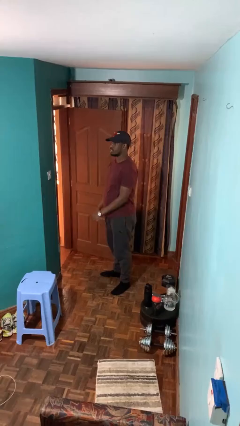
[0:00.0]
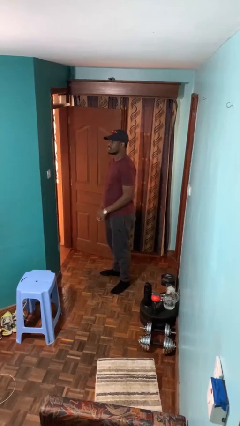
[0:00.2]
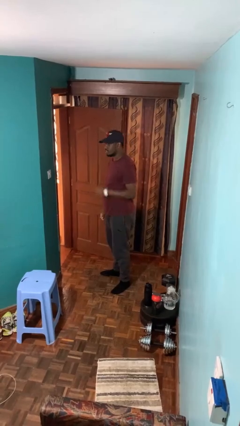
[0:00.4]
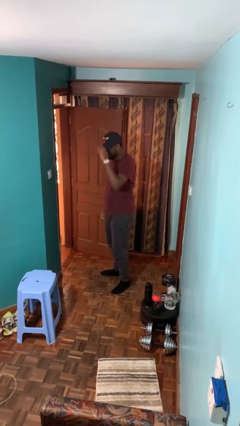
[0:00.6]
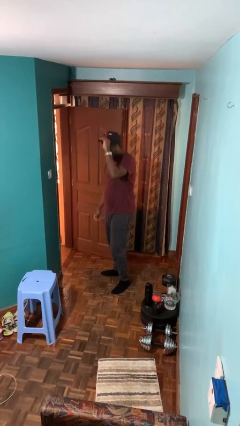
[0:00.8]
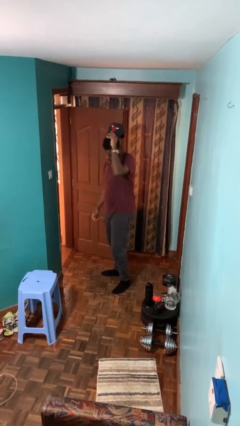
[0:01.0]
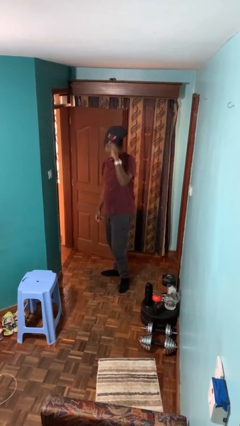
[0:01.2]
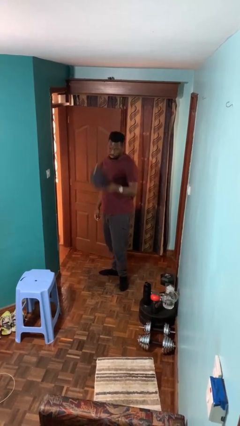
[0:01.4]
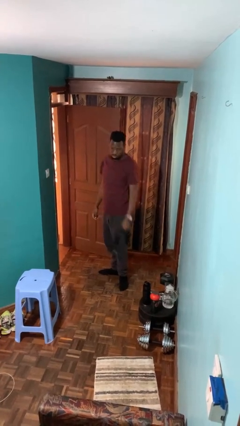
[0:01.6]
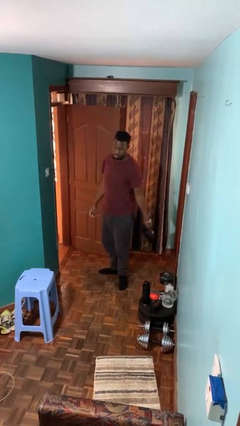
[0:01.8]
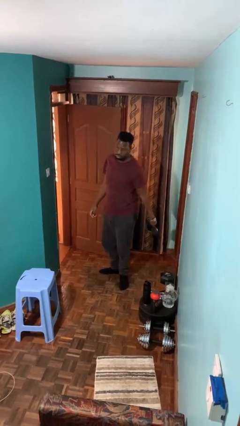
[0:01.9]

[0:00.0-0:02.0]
person takes off hat

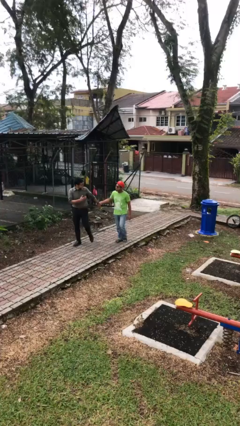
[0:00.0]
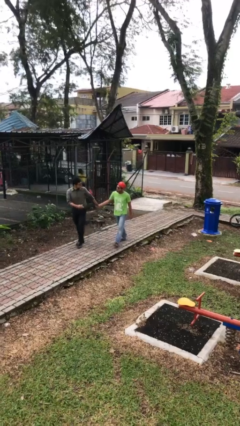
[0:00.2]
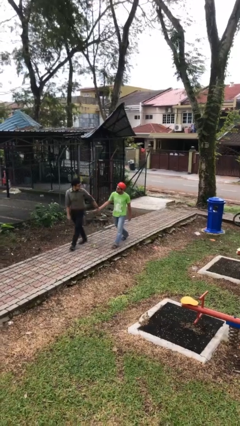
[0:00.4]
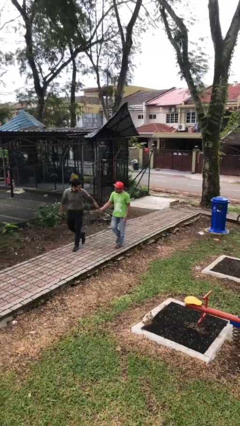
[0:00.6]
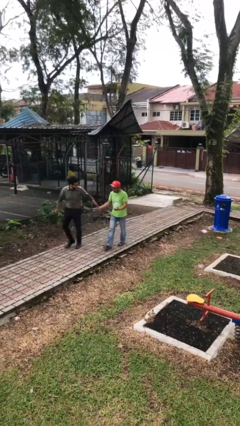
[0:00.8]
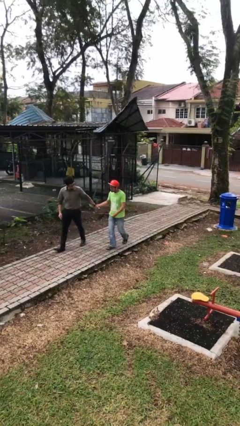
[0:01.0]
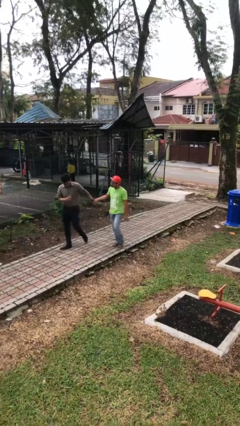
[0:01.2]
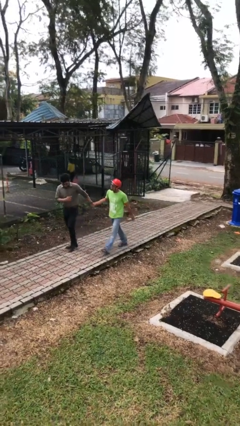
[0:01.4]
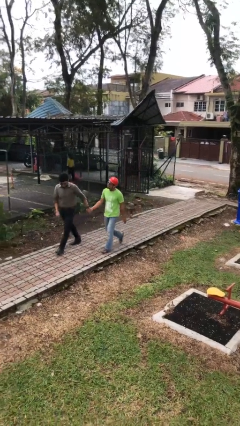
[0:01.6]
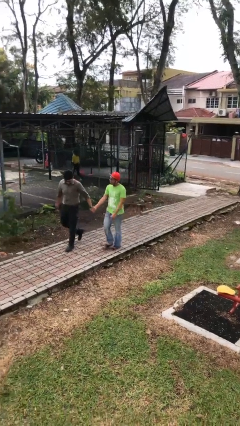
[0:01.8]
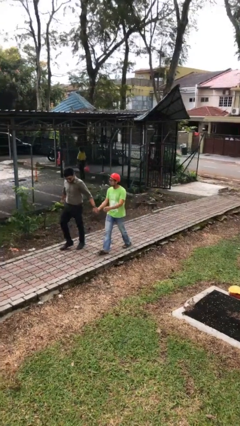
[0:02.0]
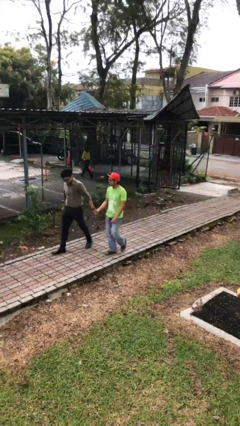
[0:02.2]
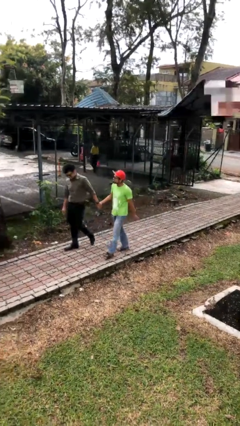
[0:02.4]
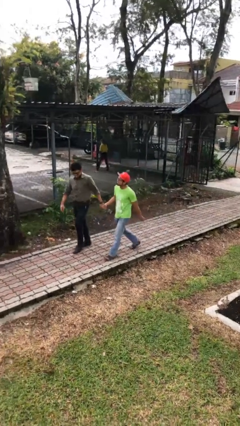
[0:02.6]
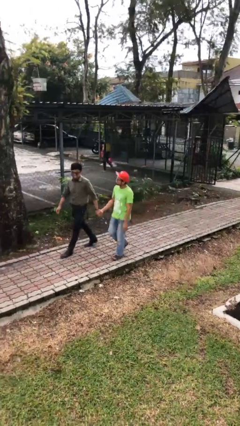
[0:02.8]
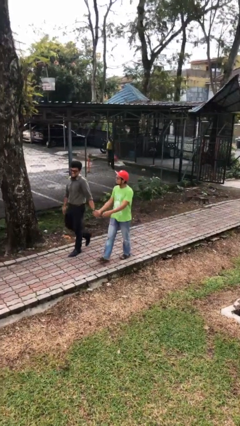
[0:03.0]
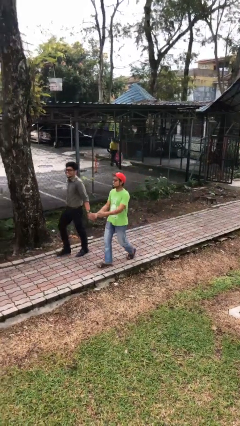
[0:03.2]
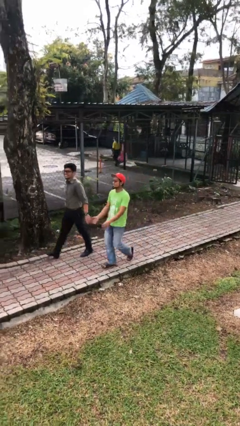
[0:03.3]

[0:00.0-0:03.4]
person holds hand

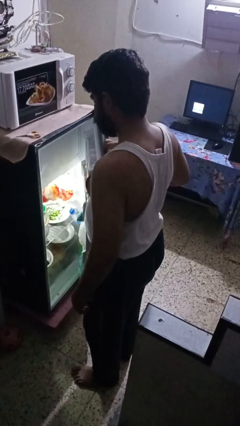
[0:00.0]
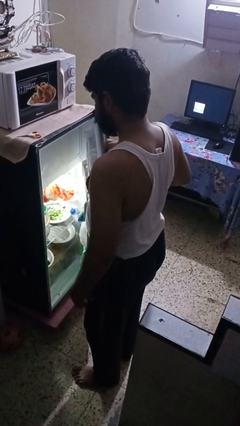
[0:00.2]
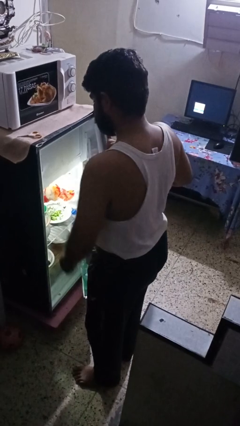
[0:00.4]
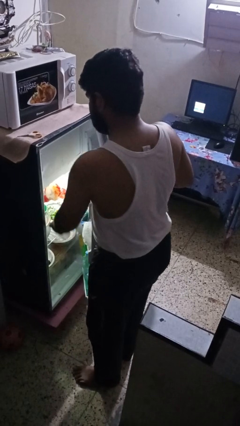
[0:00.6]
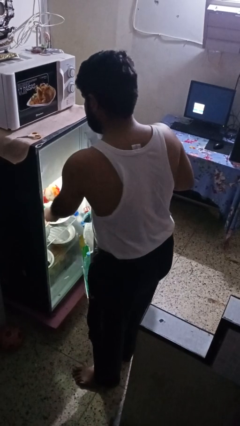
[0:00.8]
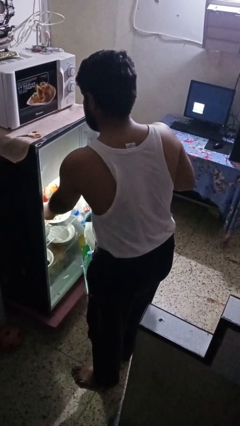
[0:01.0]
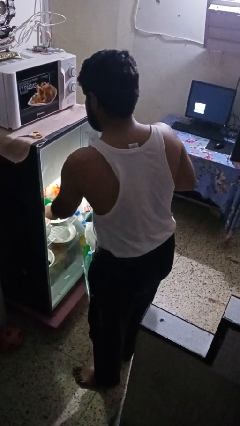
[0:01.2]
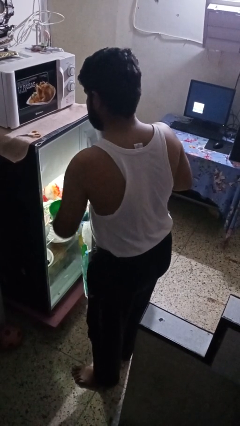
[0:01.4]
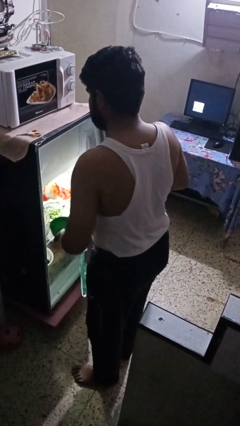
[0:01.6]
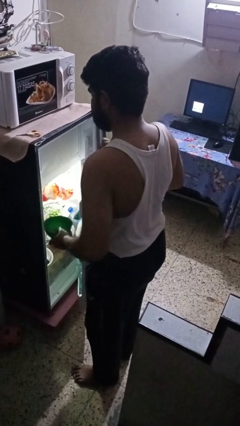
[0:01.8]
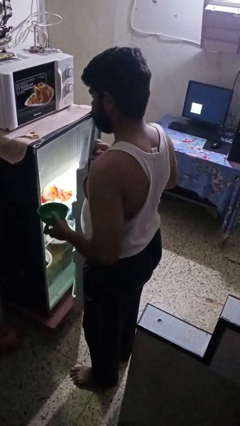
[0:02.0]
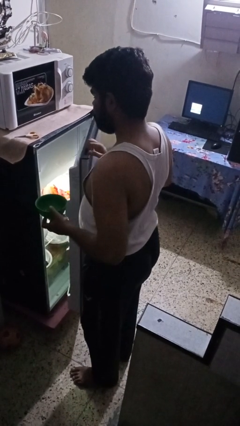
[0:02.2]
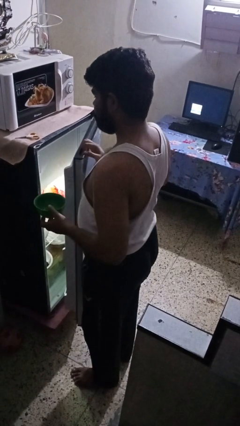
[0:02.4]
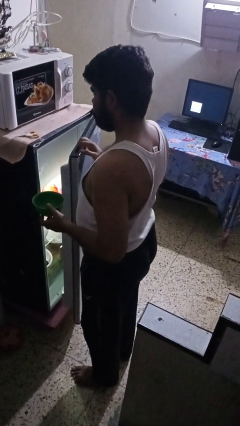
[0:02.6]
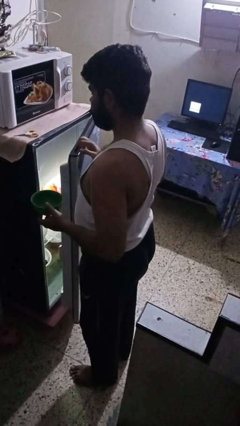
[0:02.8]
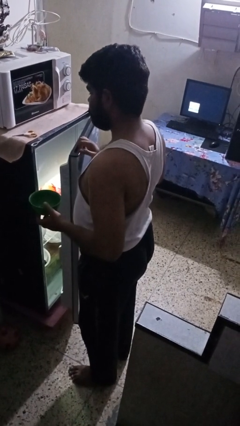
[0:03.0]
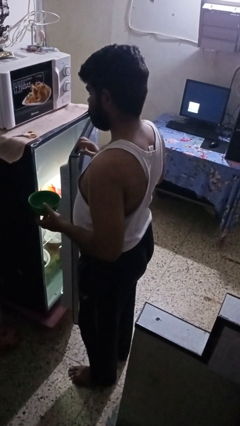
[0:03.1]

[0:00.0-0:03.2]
person takes object from refrigerator

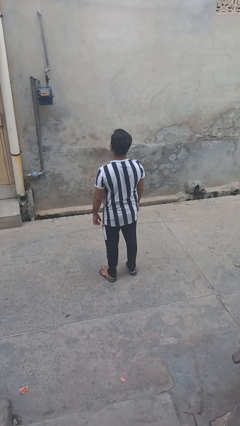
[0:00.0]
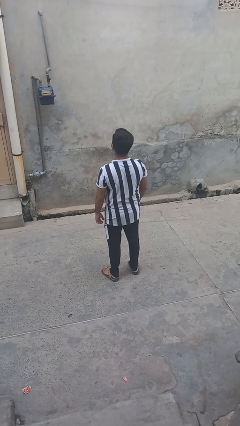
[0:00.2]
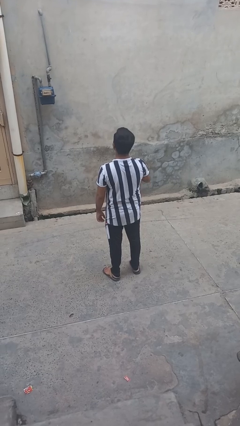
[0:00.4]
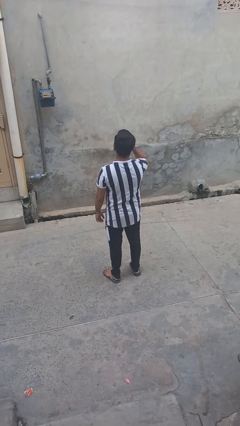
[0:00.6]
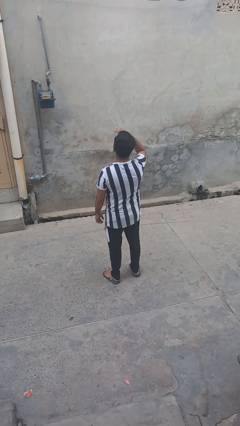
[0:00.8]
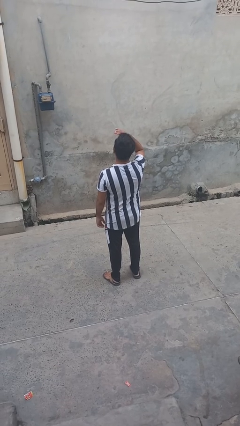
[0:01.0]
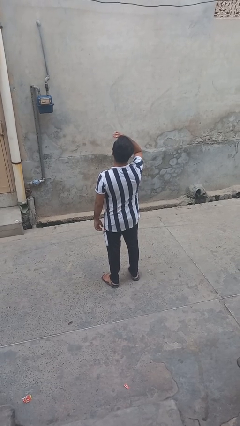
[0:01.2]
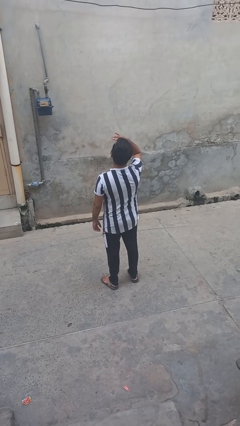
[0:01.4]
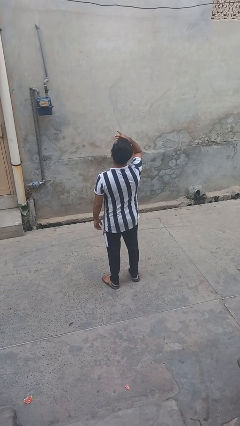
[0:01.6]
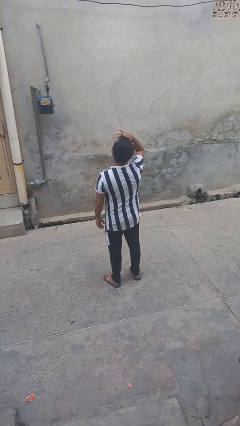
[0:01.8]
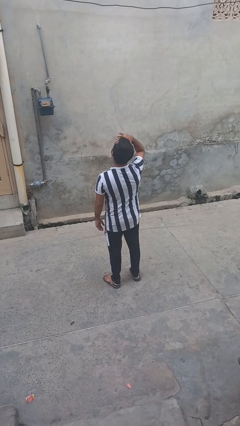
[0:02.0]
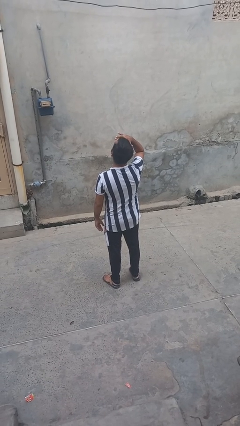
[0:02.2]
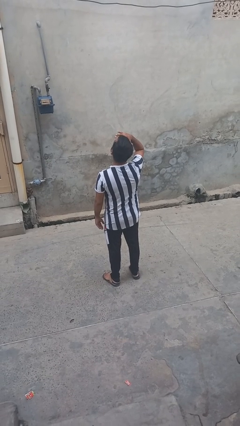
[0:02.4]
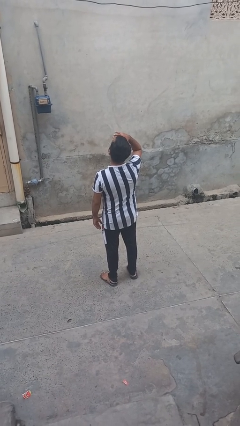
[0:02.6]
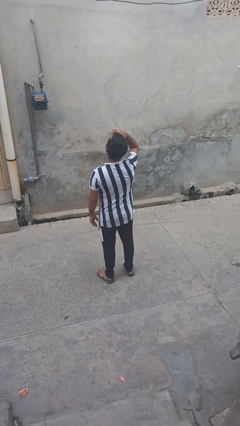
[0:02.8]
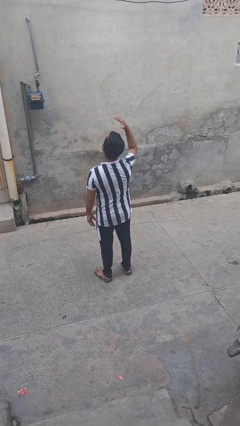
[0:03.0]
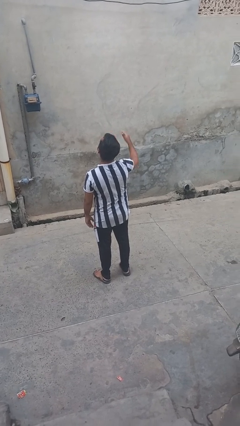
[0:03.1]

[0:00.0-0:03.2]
person shades eyes

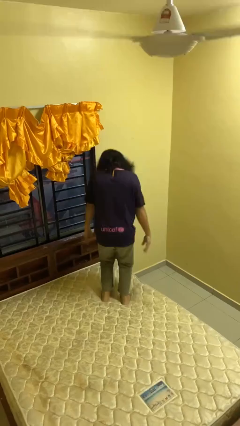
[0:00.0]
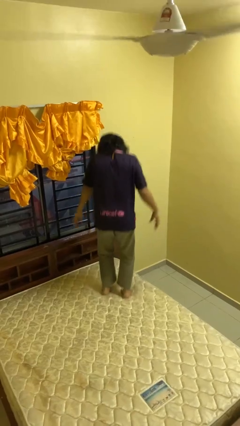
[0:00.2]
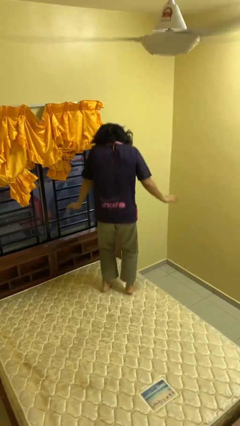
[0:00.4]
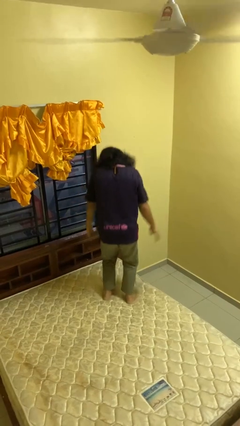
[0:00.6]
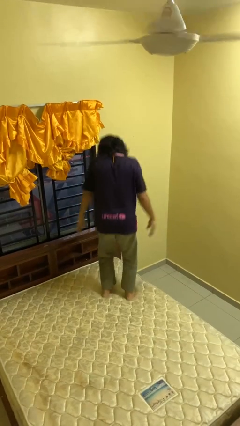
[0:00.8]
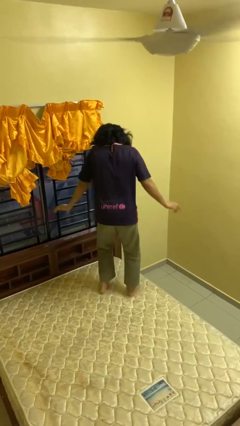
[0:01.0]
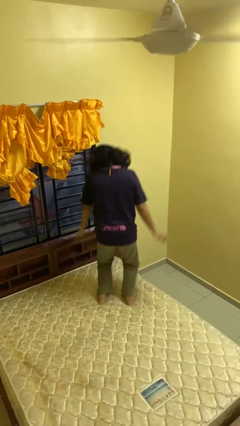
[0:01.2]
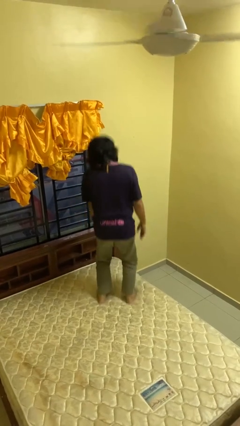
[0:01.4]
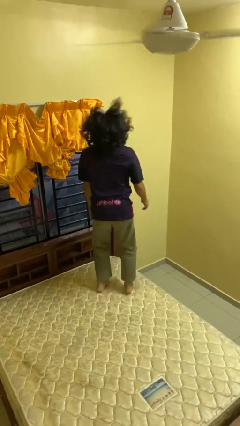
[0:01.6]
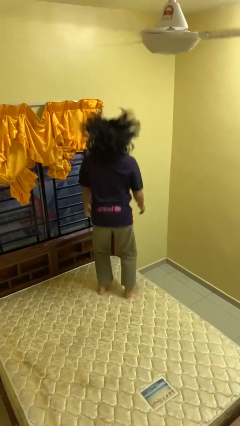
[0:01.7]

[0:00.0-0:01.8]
person jumps on bed

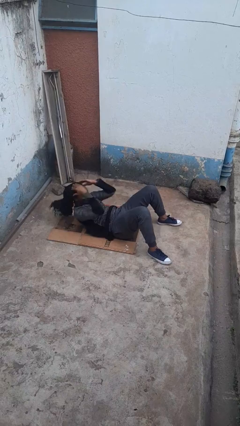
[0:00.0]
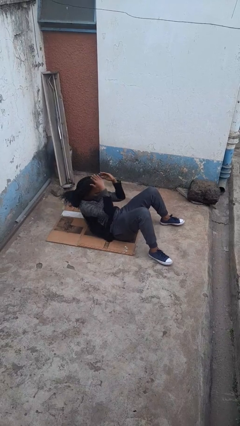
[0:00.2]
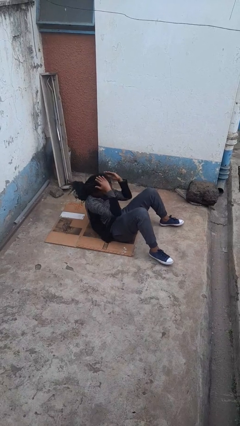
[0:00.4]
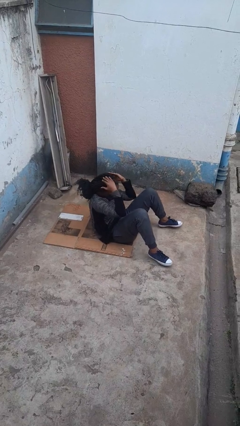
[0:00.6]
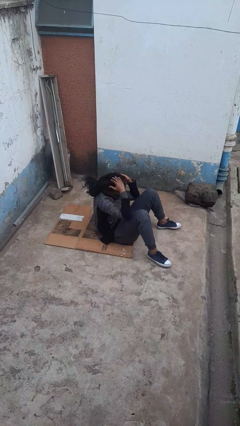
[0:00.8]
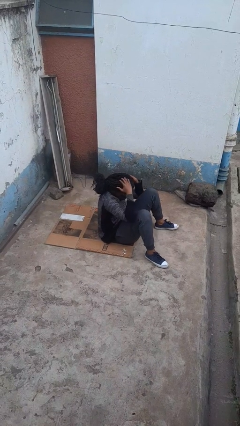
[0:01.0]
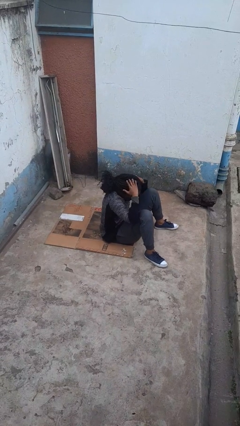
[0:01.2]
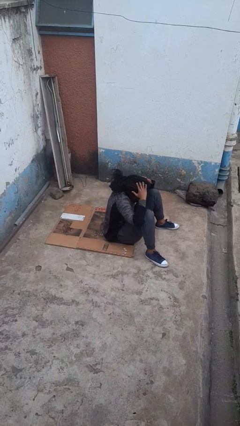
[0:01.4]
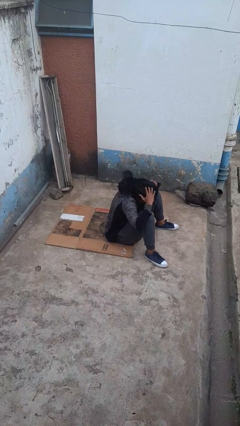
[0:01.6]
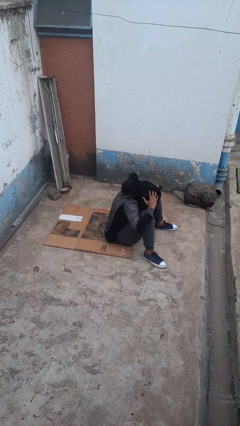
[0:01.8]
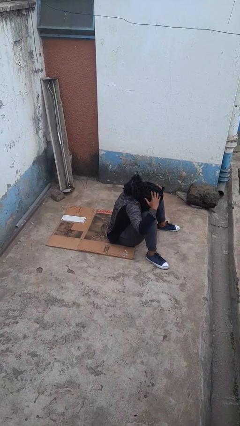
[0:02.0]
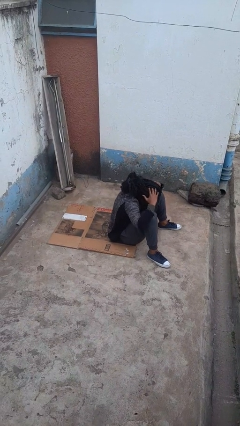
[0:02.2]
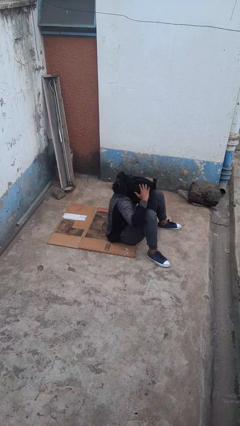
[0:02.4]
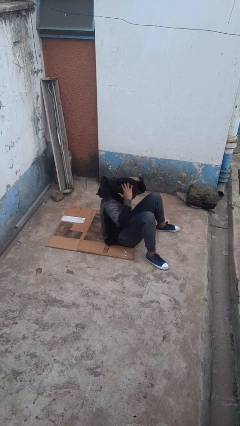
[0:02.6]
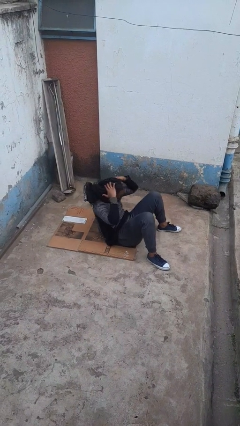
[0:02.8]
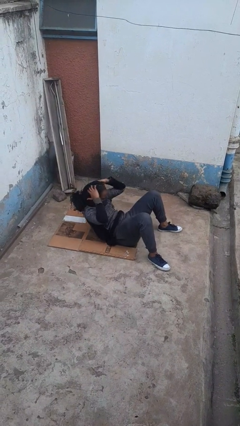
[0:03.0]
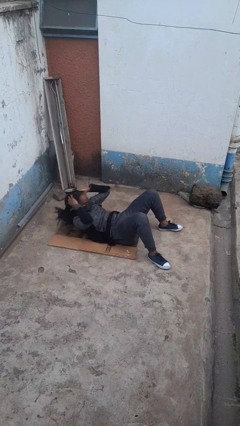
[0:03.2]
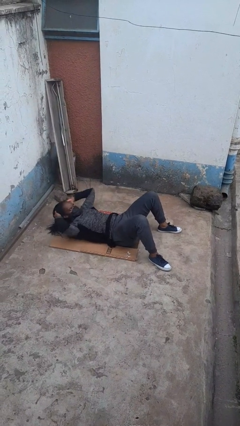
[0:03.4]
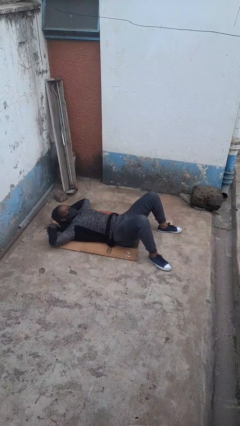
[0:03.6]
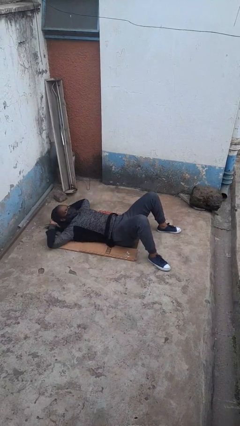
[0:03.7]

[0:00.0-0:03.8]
person exercises with situp
